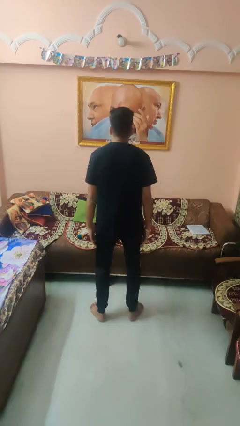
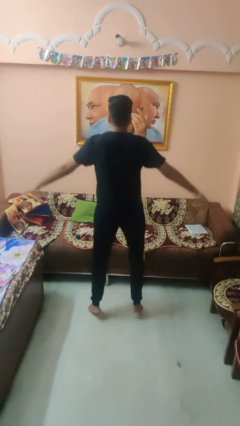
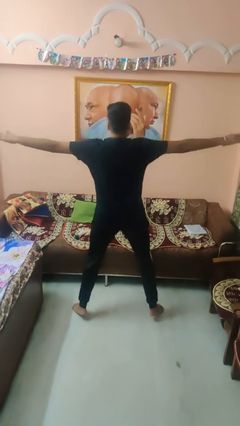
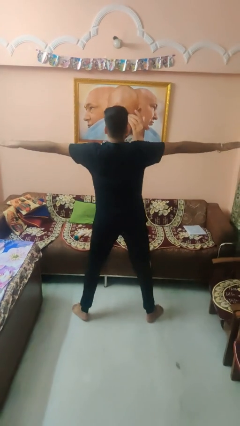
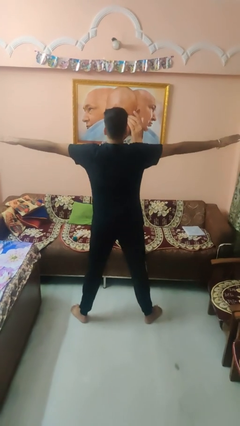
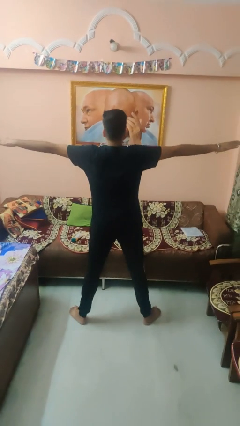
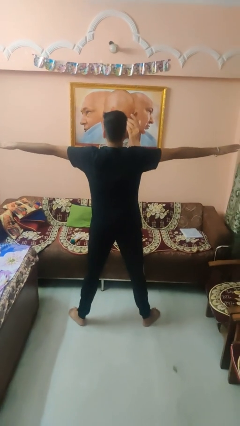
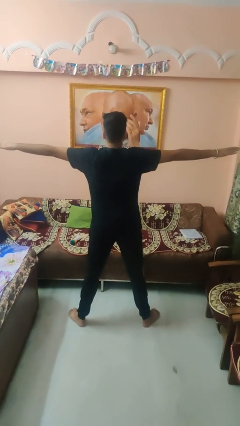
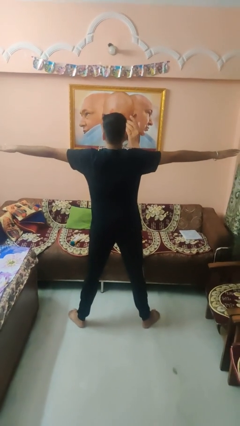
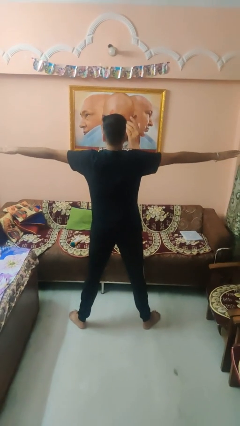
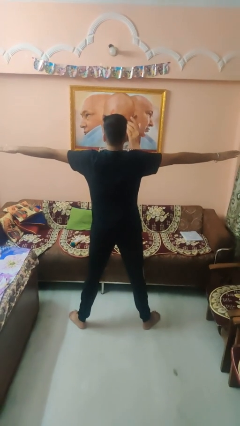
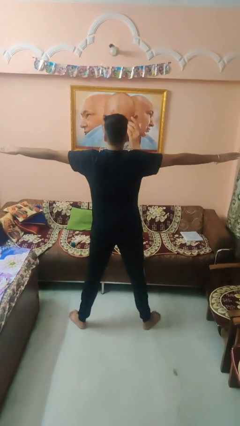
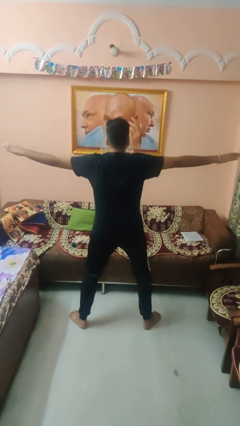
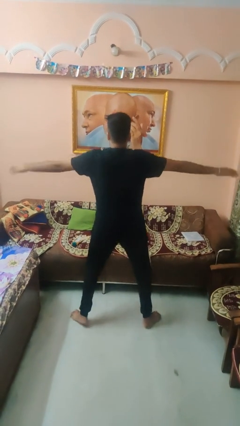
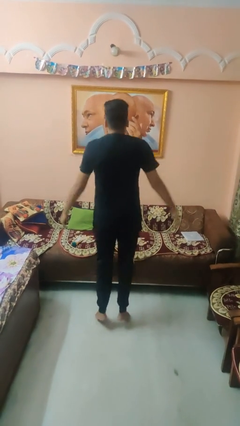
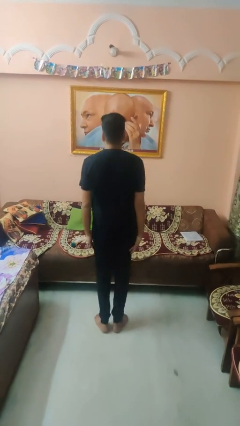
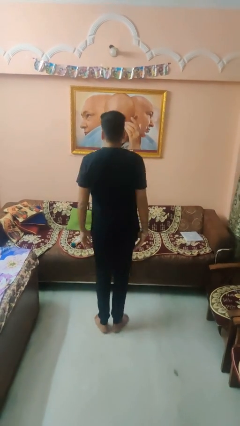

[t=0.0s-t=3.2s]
person exercises with jumping jacks

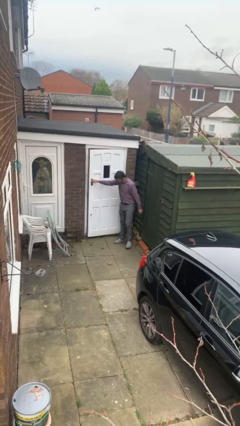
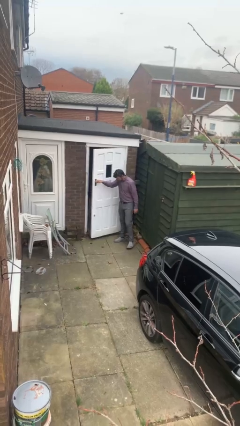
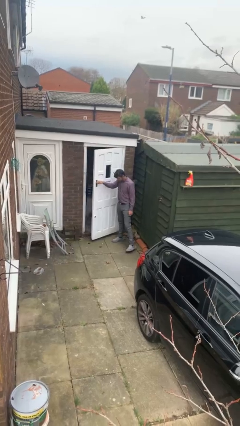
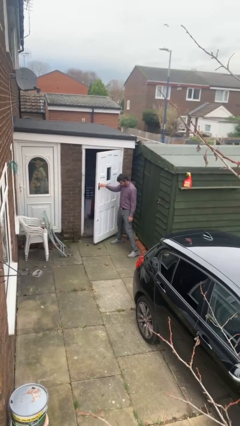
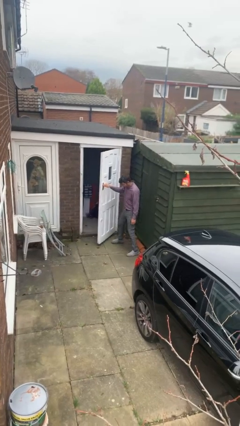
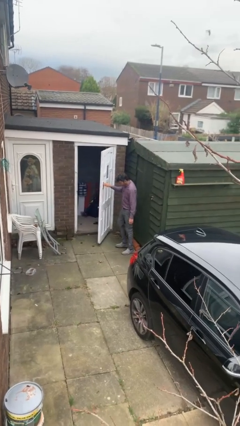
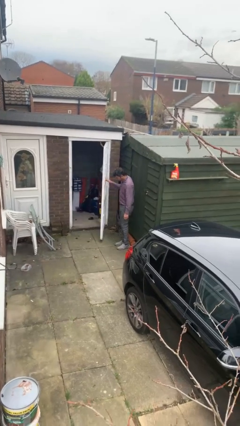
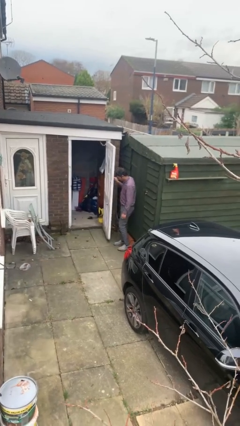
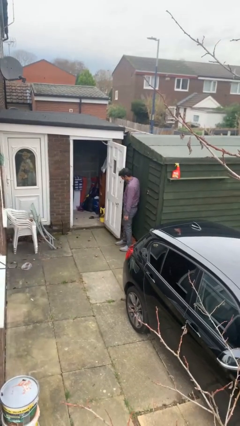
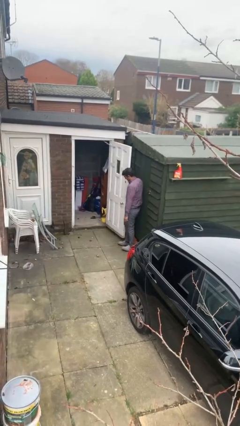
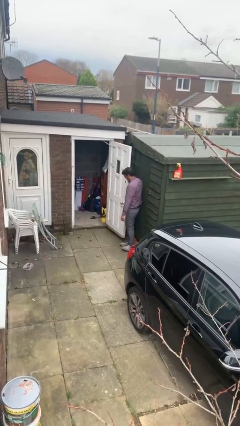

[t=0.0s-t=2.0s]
person opens facility door

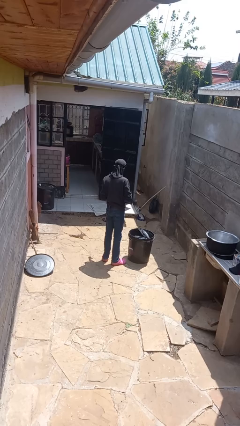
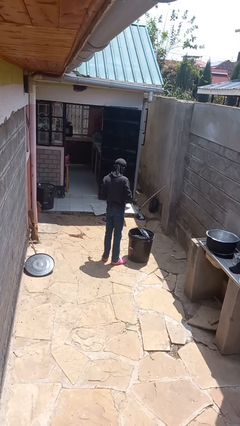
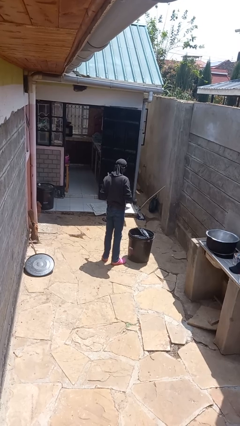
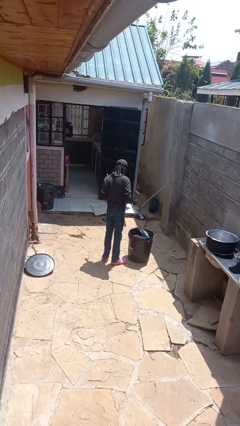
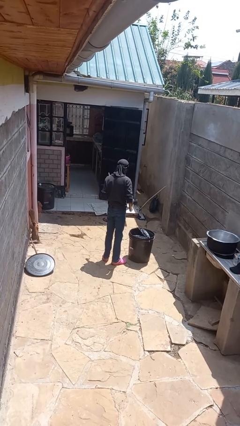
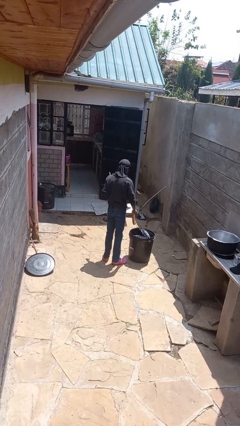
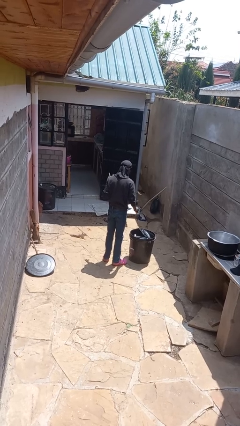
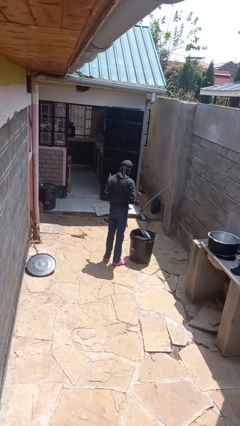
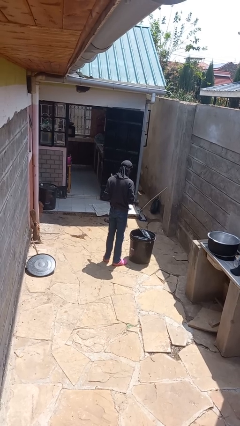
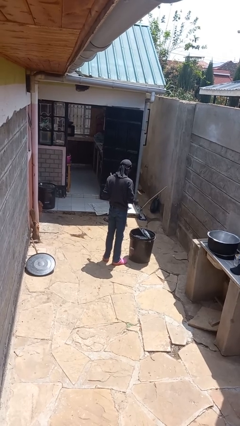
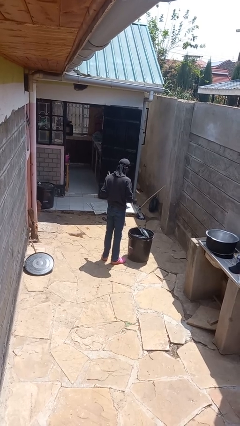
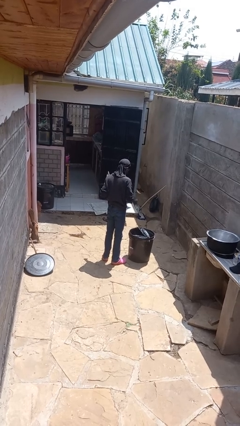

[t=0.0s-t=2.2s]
person discards trash

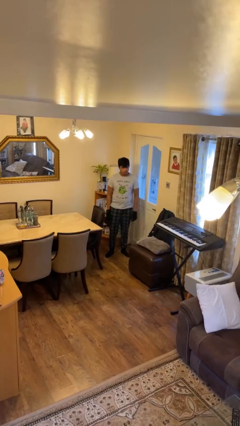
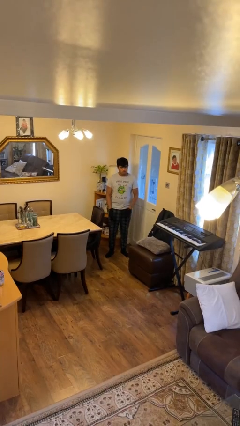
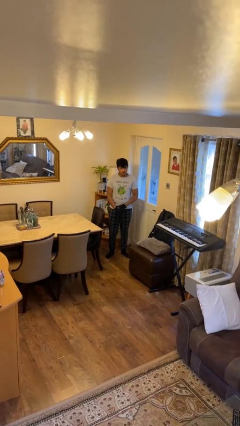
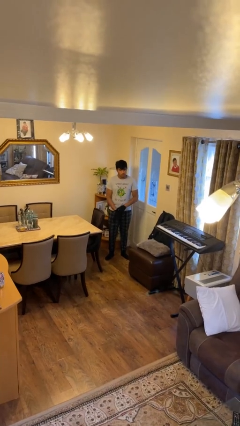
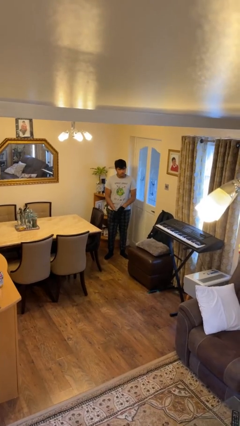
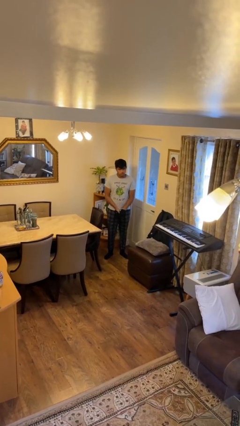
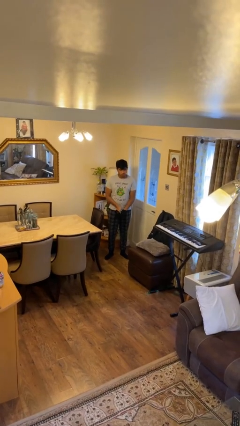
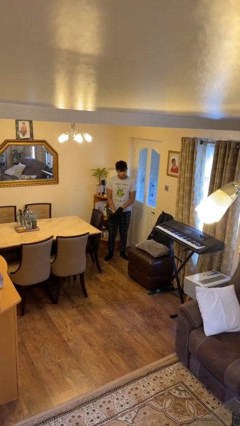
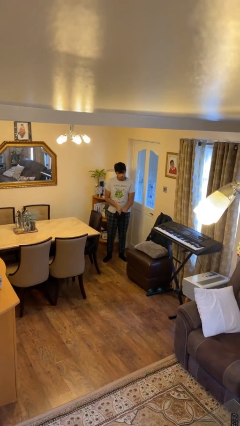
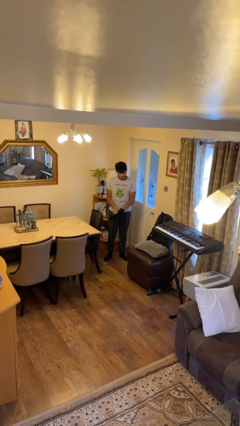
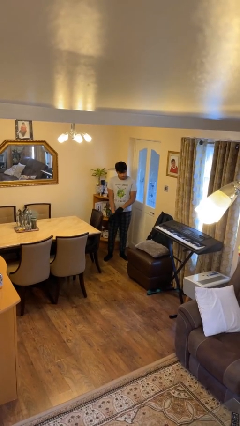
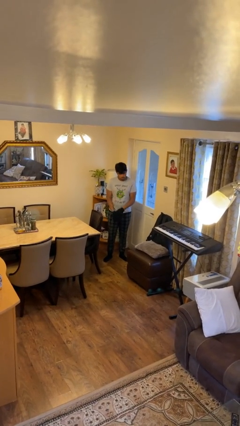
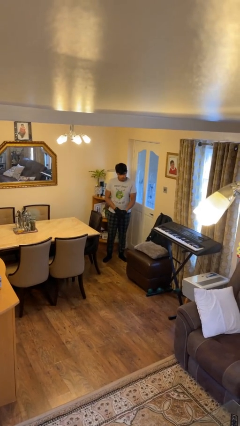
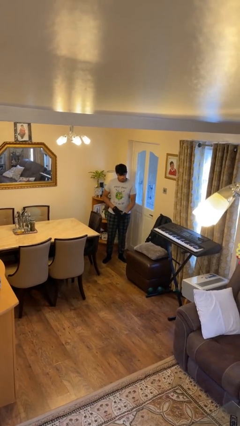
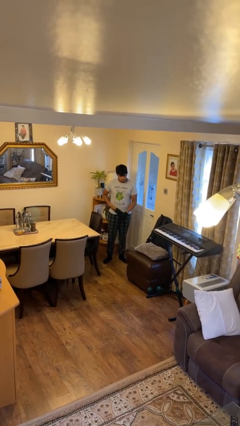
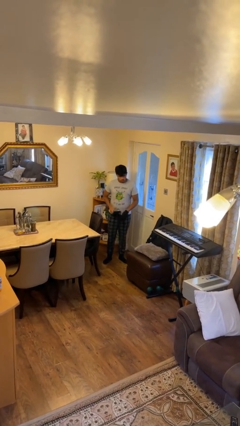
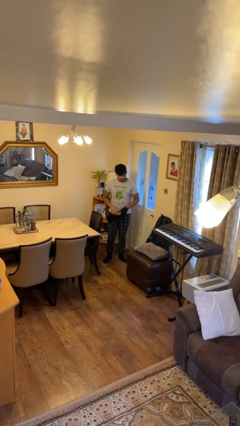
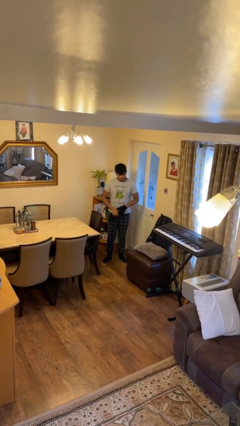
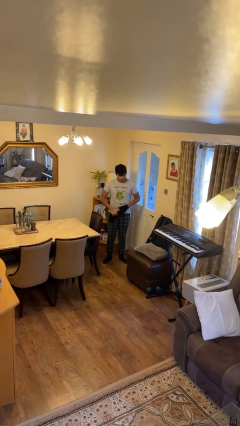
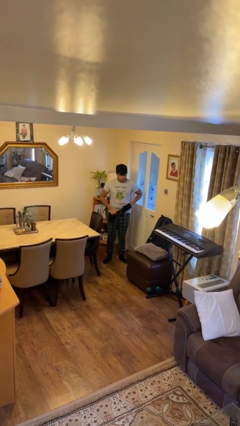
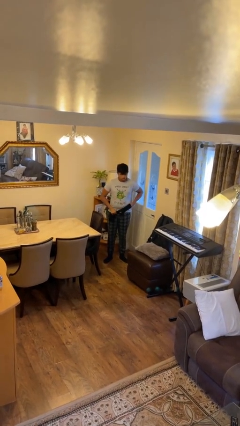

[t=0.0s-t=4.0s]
person takes off gloves

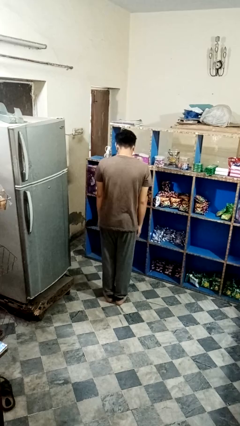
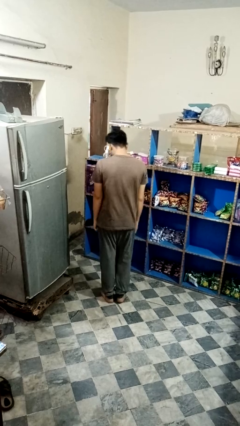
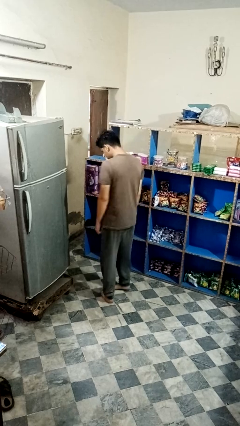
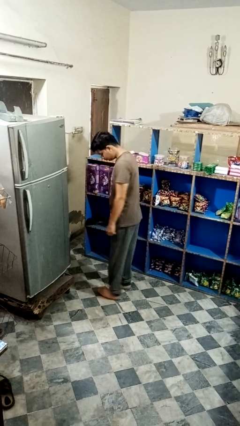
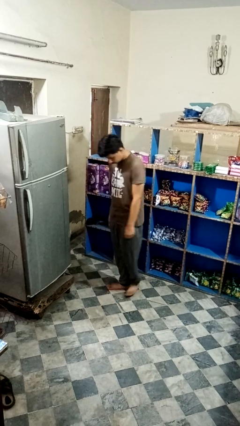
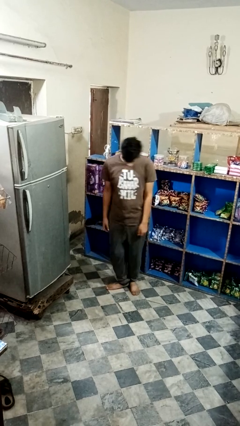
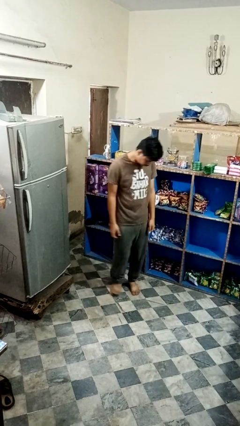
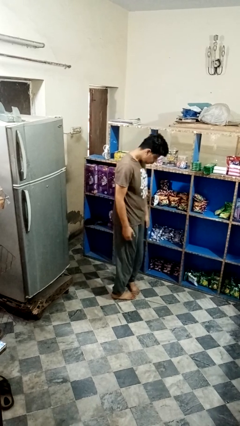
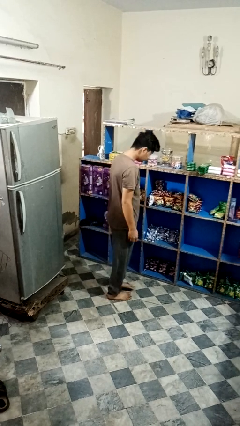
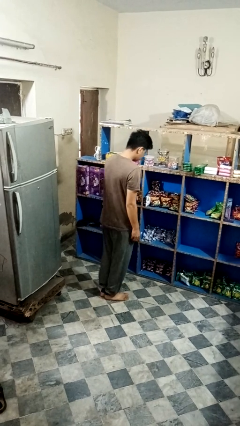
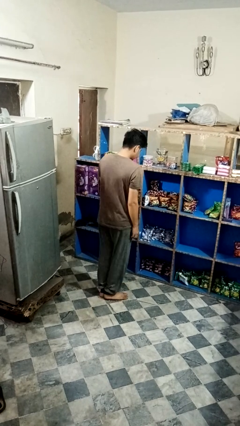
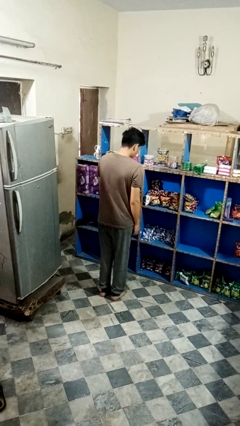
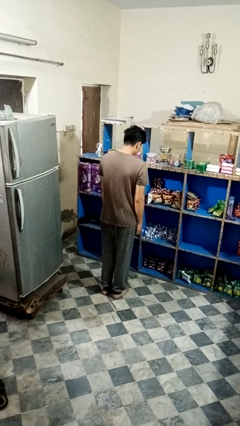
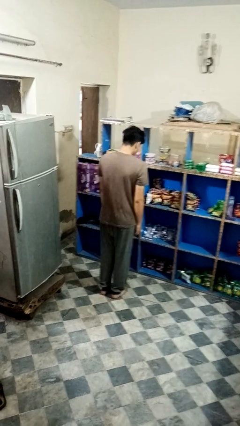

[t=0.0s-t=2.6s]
person twirls

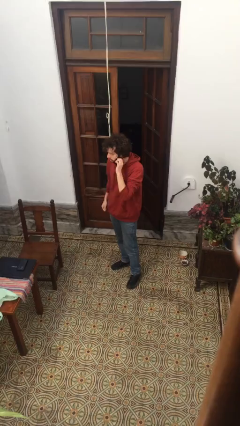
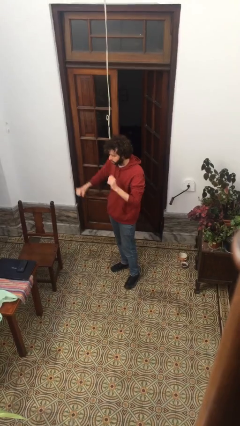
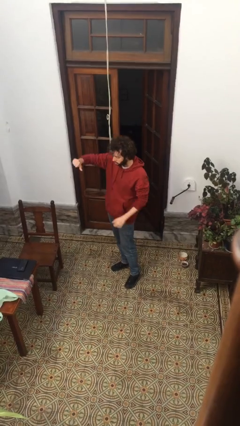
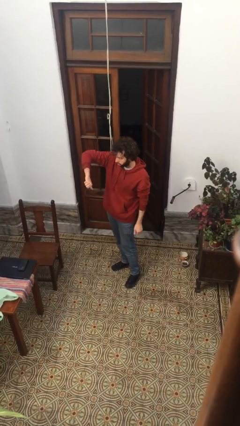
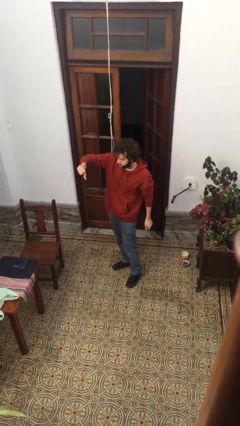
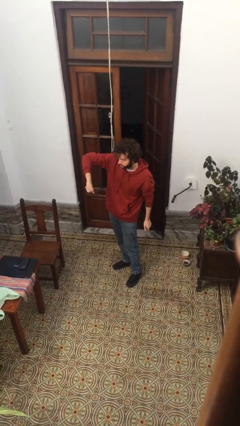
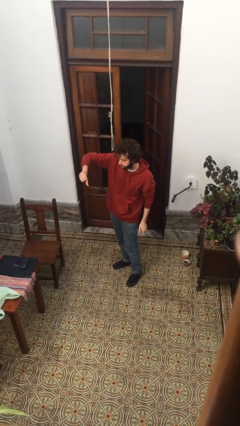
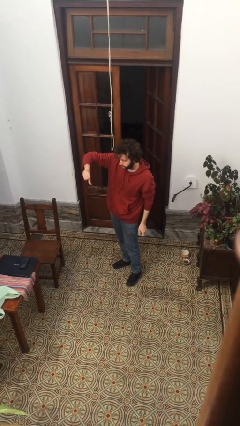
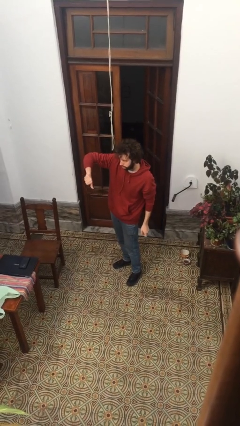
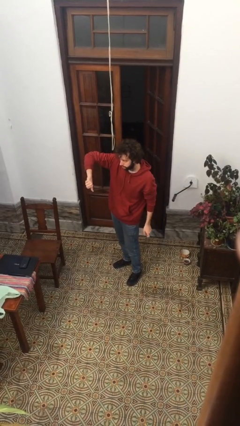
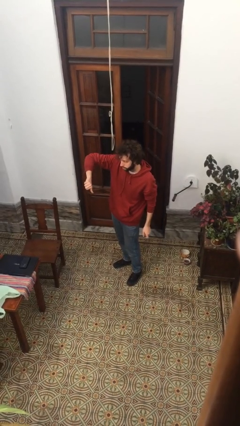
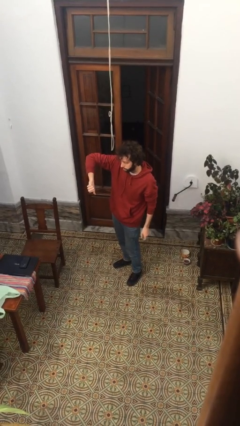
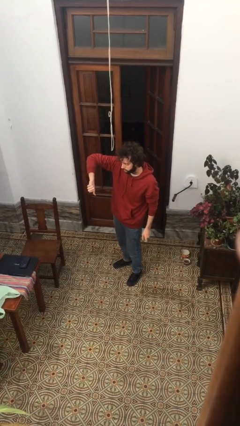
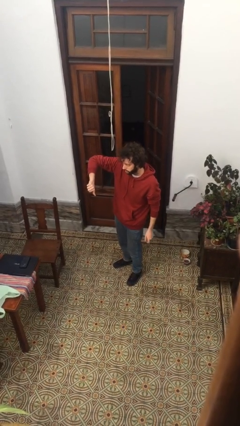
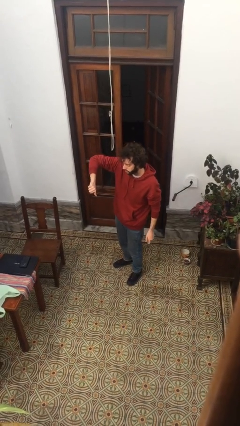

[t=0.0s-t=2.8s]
person gestures thumbs down

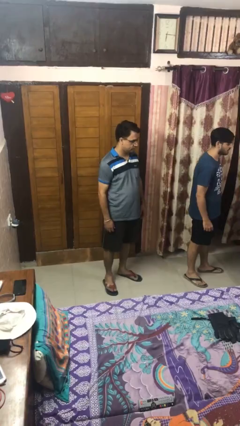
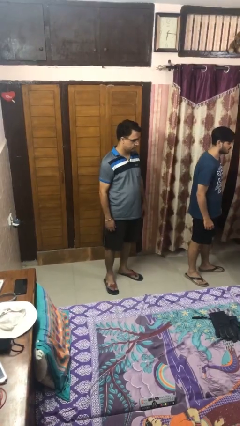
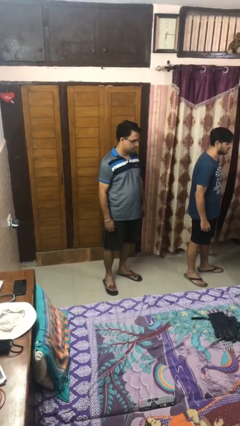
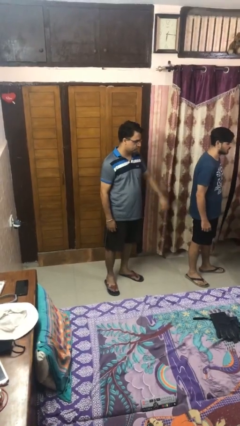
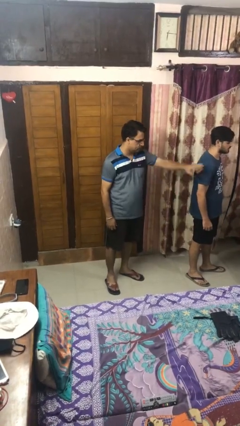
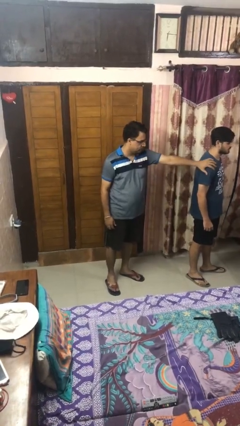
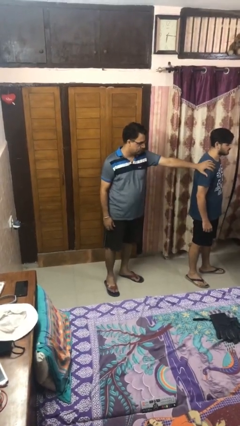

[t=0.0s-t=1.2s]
person grabs person by shoulder
